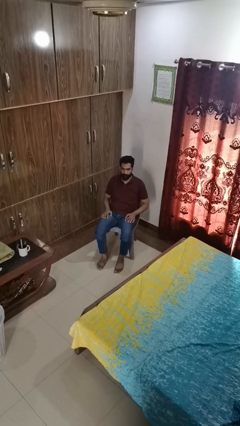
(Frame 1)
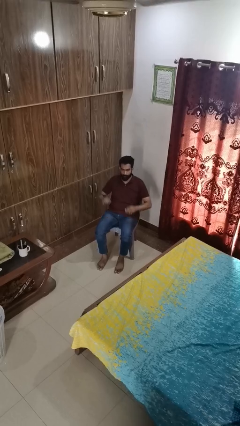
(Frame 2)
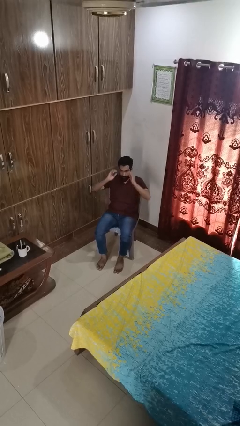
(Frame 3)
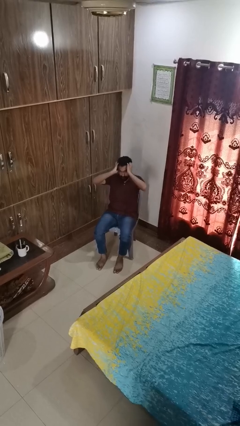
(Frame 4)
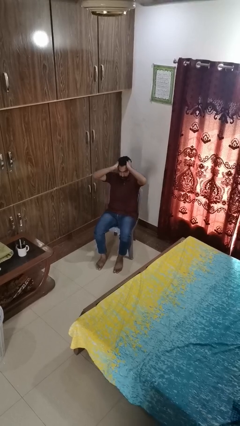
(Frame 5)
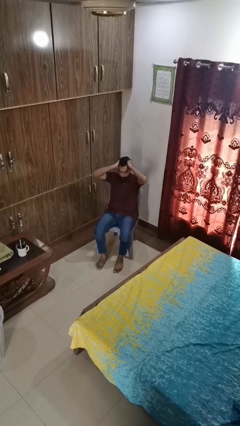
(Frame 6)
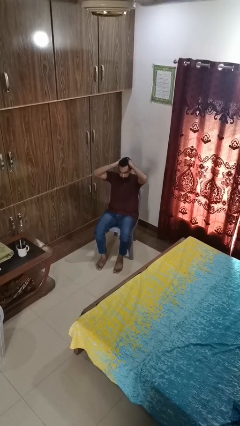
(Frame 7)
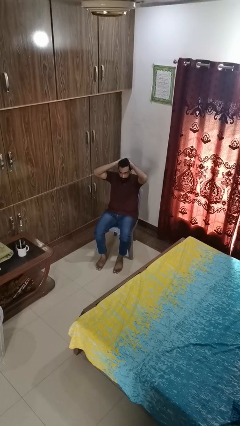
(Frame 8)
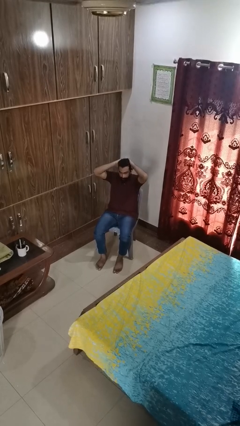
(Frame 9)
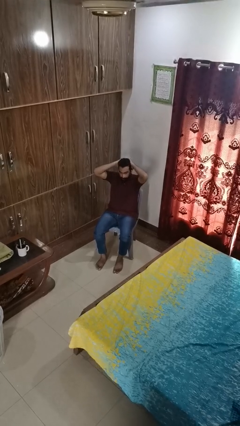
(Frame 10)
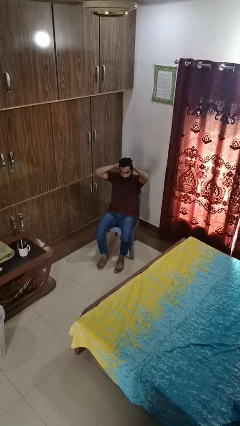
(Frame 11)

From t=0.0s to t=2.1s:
person strokes hair

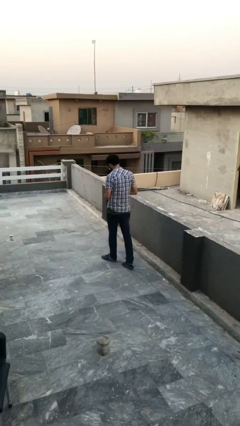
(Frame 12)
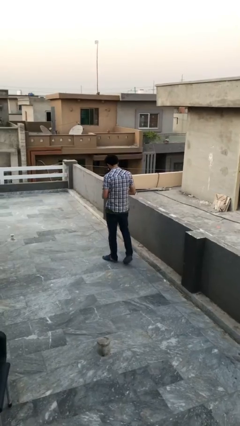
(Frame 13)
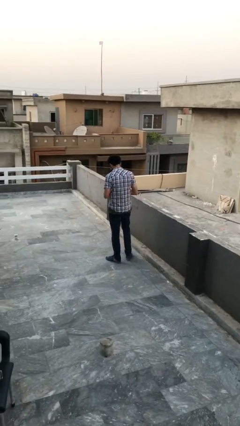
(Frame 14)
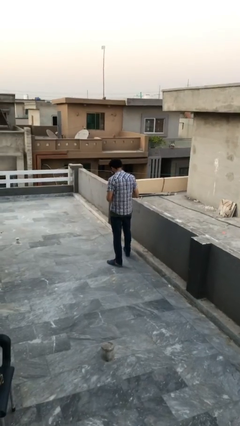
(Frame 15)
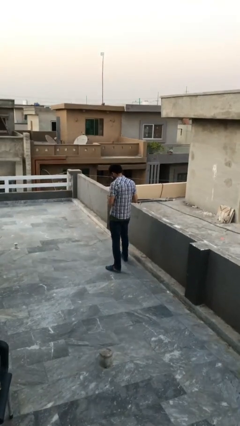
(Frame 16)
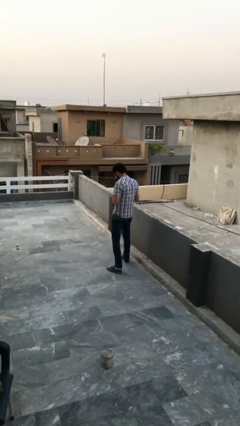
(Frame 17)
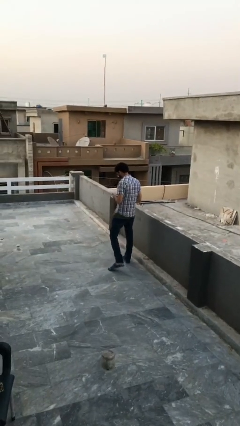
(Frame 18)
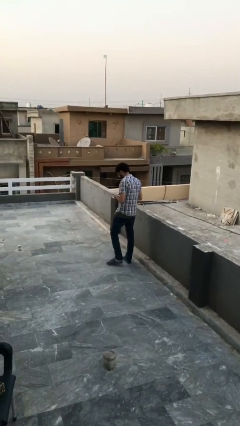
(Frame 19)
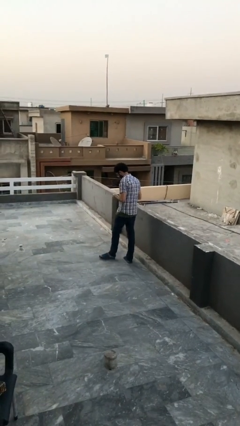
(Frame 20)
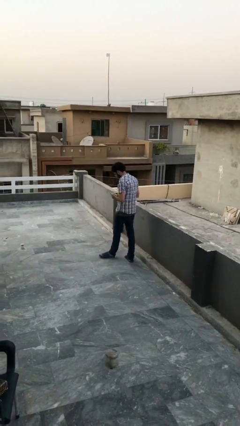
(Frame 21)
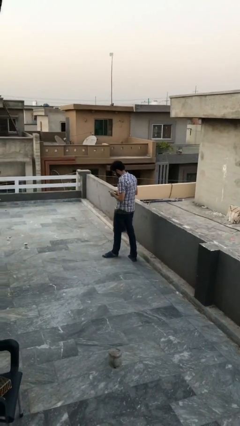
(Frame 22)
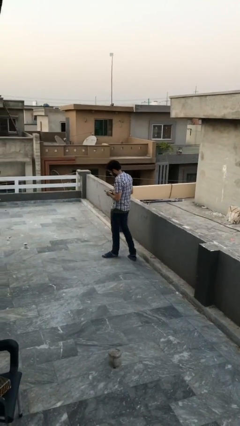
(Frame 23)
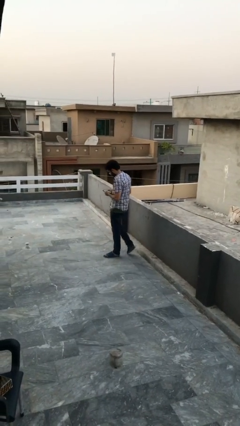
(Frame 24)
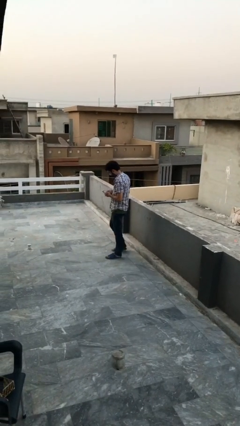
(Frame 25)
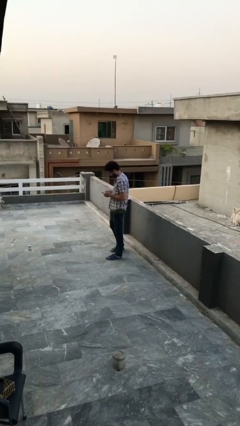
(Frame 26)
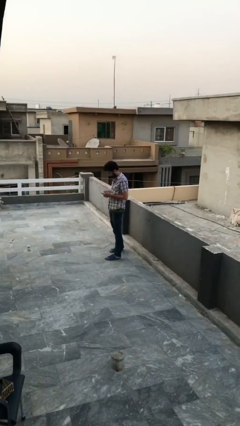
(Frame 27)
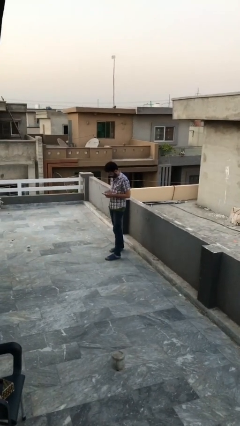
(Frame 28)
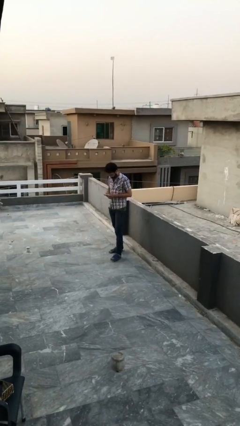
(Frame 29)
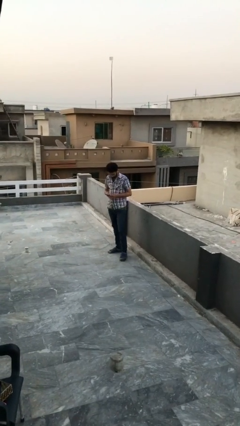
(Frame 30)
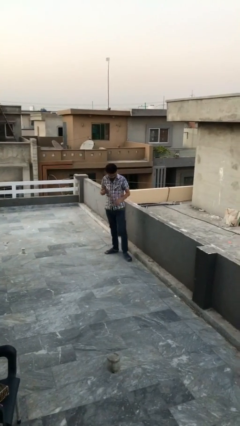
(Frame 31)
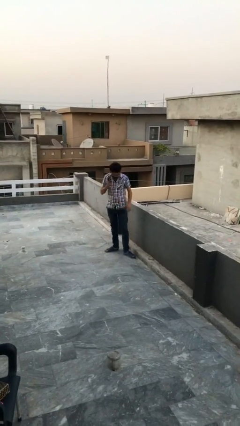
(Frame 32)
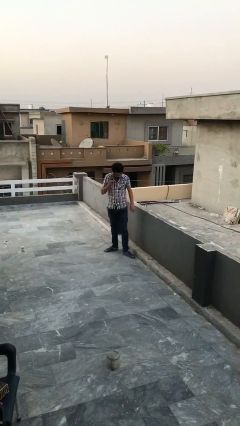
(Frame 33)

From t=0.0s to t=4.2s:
person texts on phone

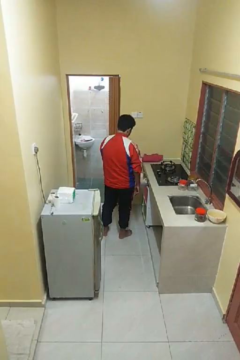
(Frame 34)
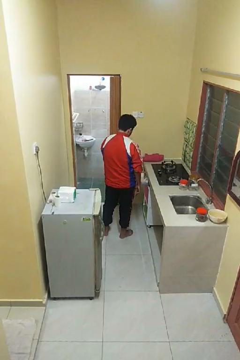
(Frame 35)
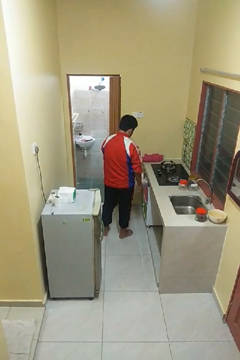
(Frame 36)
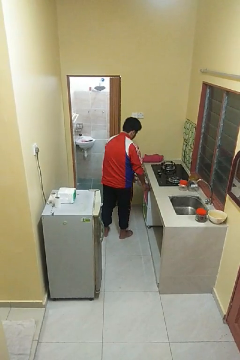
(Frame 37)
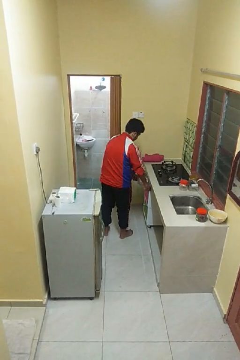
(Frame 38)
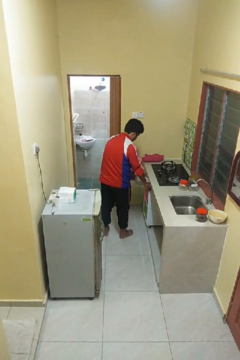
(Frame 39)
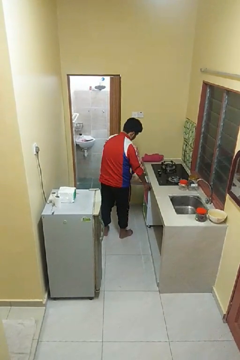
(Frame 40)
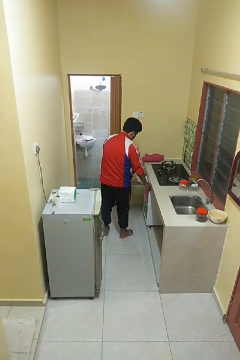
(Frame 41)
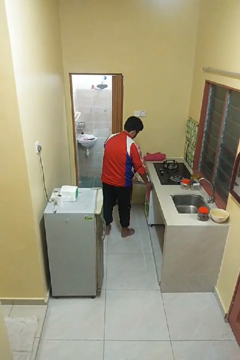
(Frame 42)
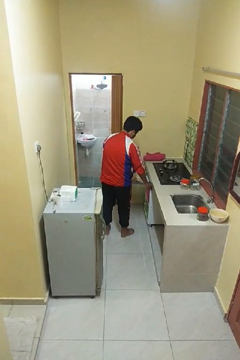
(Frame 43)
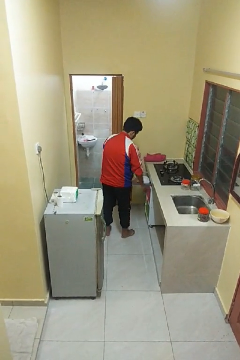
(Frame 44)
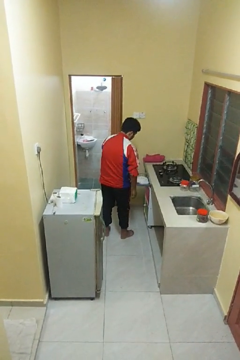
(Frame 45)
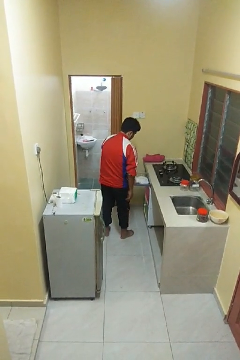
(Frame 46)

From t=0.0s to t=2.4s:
person opens kitchen drawer

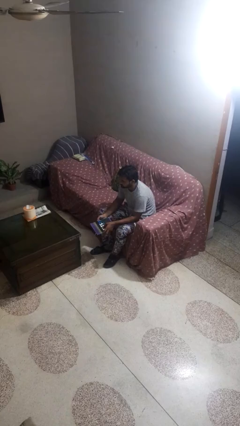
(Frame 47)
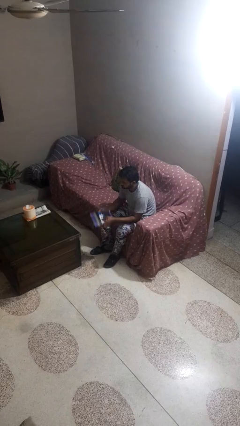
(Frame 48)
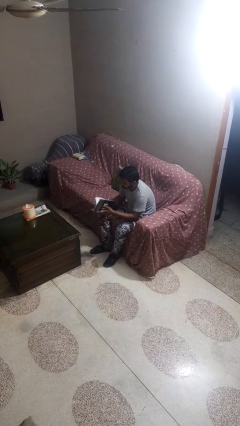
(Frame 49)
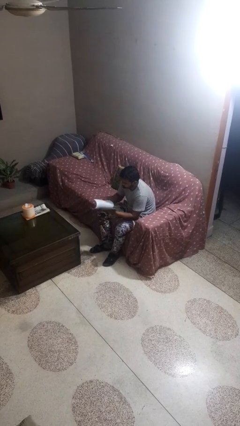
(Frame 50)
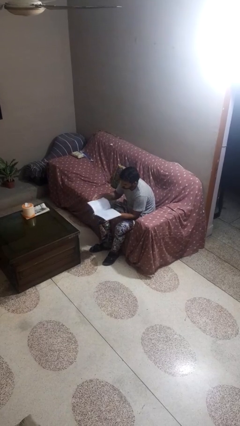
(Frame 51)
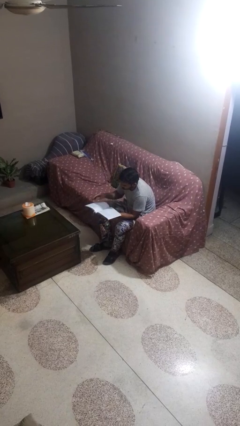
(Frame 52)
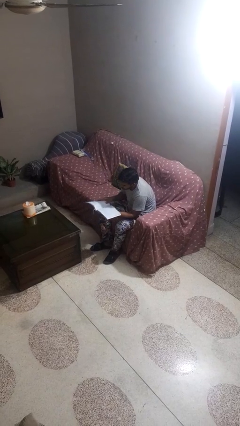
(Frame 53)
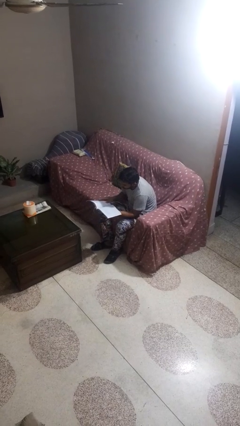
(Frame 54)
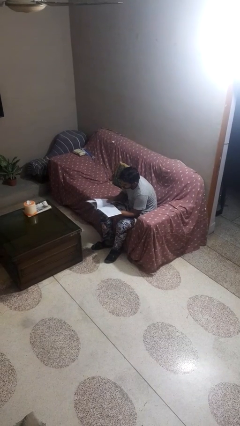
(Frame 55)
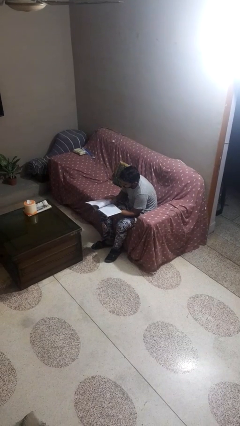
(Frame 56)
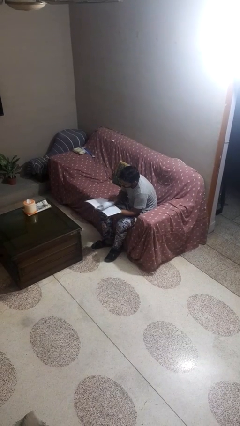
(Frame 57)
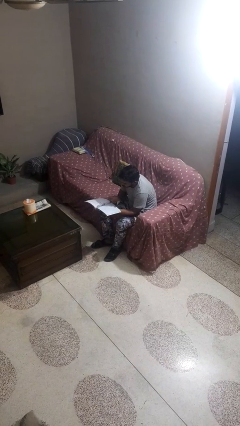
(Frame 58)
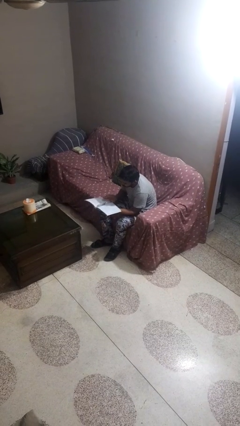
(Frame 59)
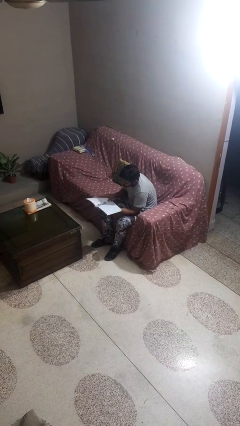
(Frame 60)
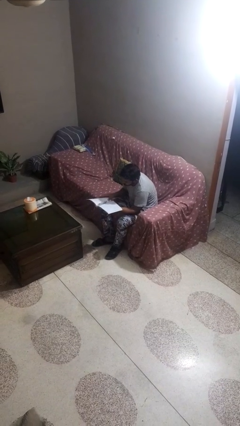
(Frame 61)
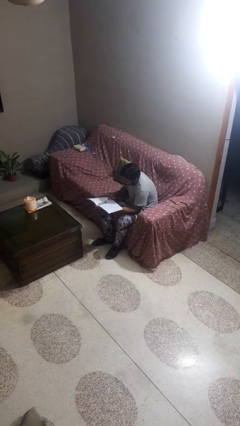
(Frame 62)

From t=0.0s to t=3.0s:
person reads book

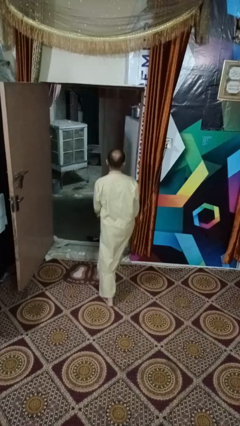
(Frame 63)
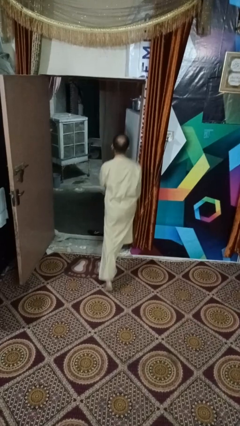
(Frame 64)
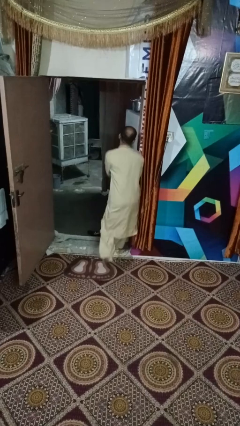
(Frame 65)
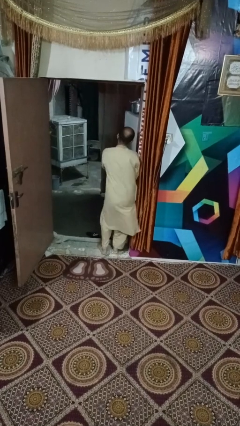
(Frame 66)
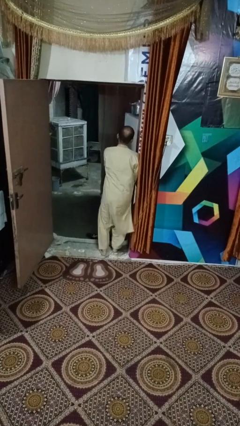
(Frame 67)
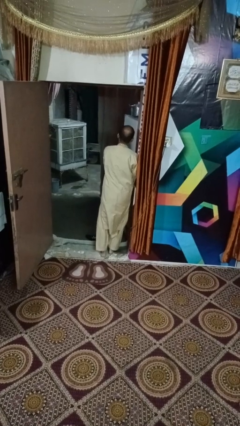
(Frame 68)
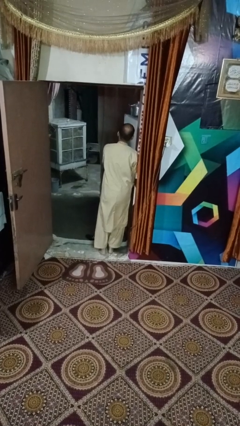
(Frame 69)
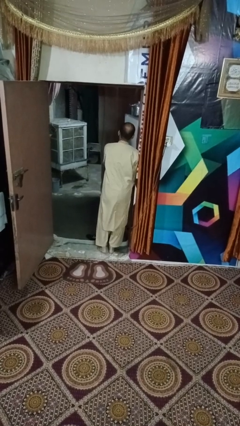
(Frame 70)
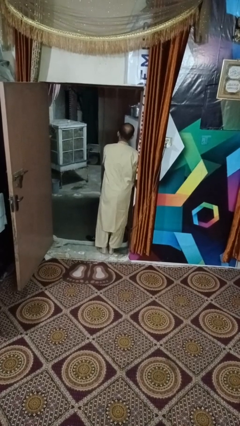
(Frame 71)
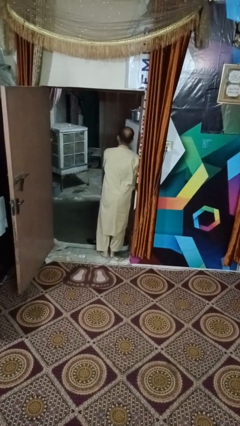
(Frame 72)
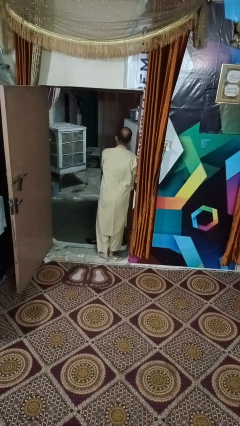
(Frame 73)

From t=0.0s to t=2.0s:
person bumps into wall

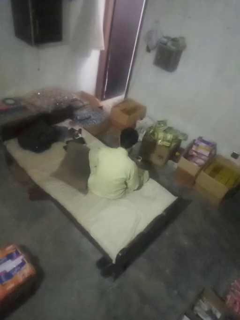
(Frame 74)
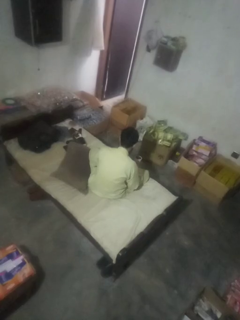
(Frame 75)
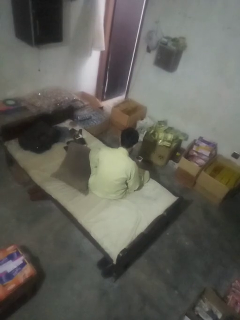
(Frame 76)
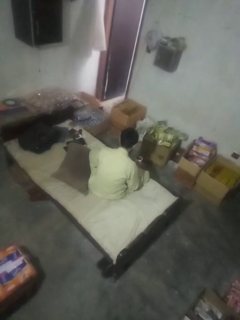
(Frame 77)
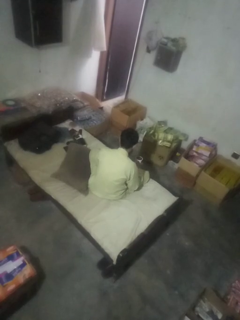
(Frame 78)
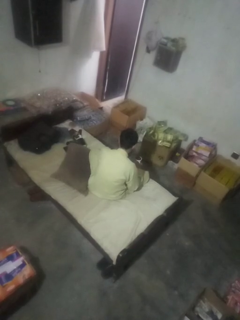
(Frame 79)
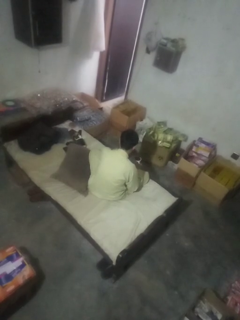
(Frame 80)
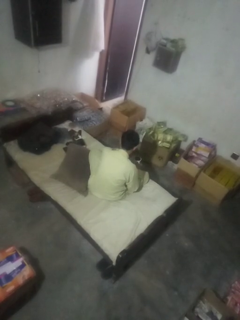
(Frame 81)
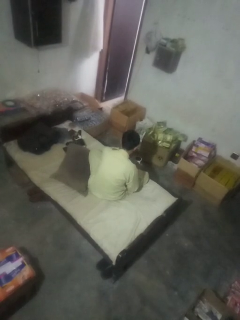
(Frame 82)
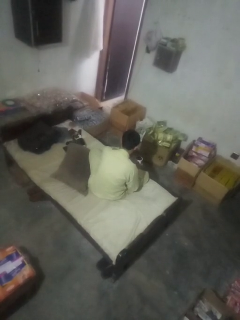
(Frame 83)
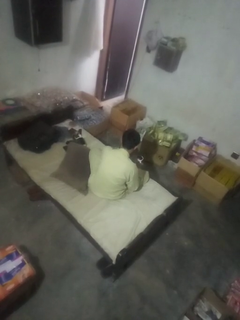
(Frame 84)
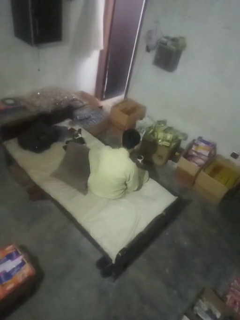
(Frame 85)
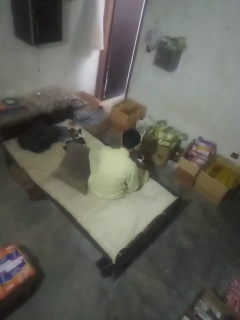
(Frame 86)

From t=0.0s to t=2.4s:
person stirs mug

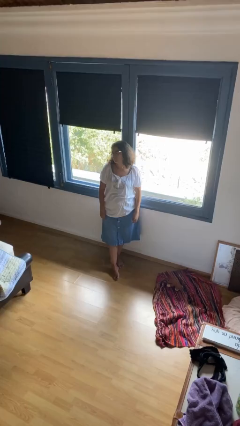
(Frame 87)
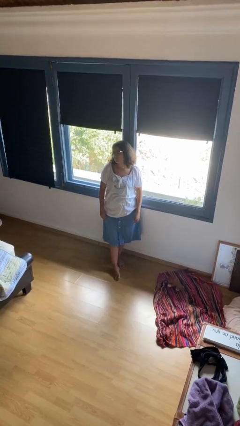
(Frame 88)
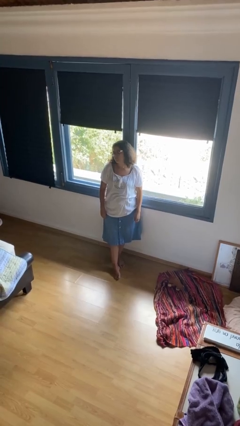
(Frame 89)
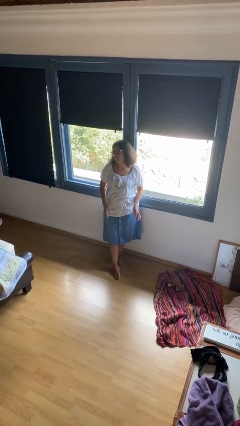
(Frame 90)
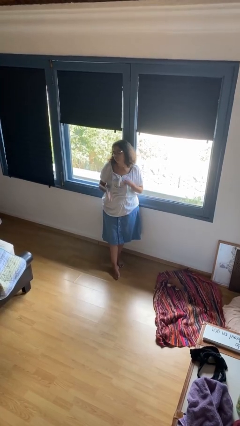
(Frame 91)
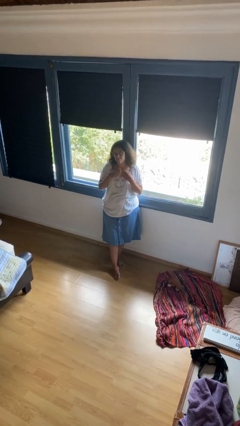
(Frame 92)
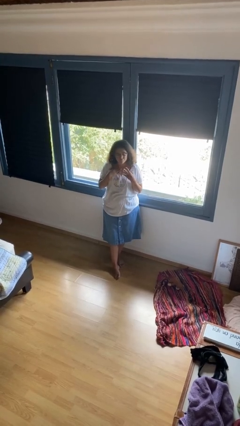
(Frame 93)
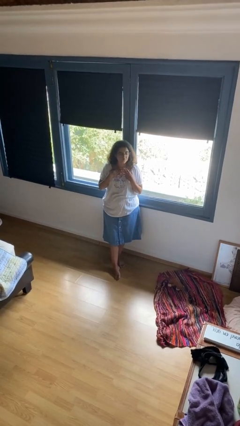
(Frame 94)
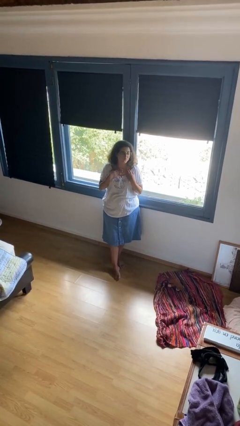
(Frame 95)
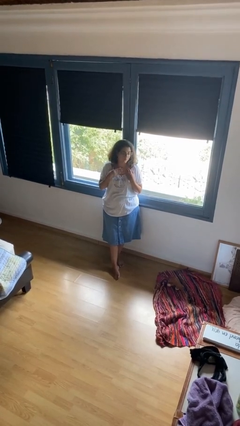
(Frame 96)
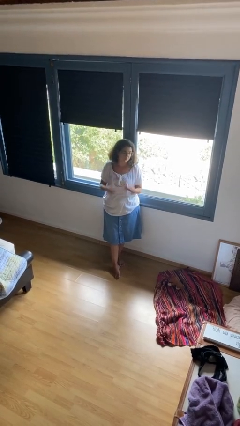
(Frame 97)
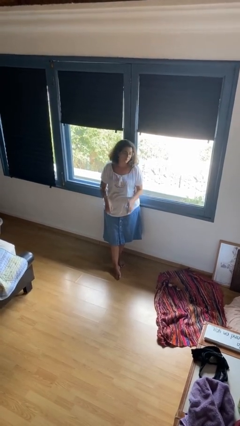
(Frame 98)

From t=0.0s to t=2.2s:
person drums on chest

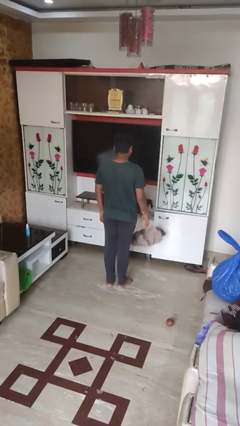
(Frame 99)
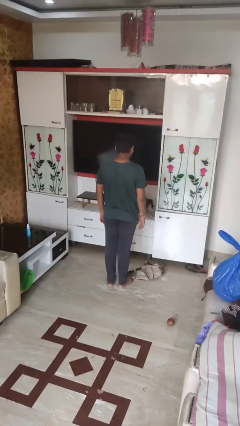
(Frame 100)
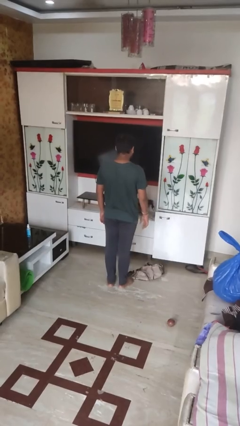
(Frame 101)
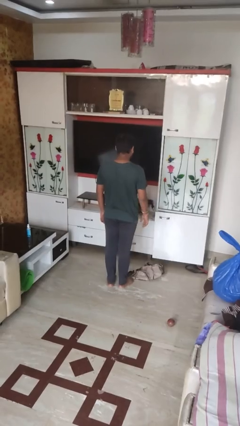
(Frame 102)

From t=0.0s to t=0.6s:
person throws object to ground
